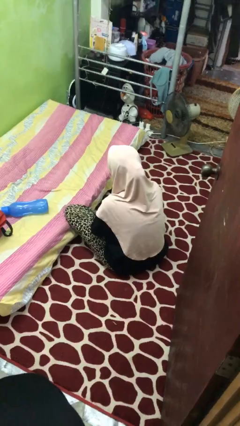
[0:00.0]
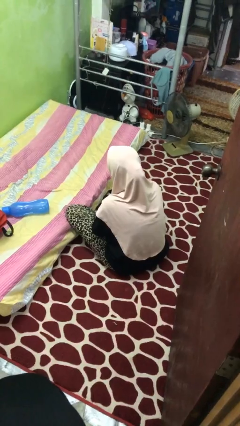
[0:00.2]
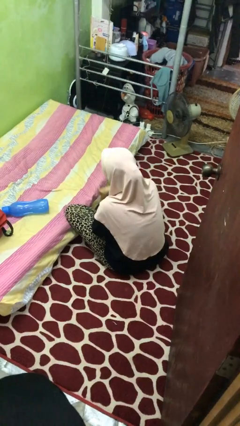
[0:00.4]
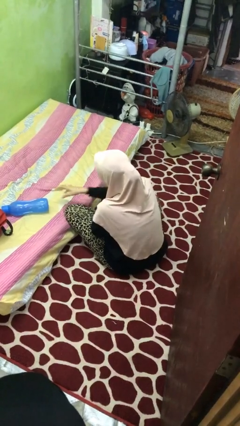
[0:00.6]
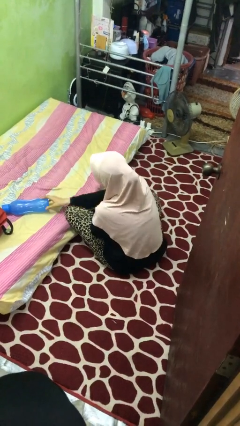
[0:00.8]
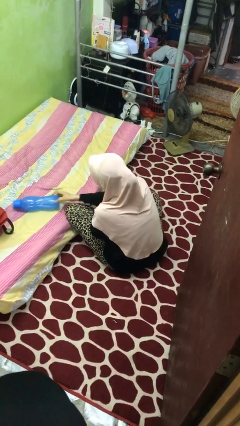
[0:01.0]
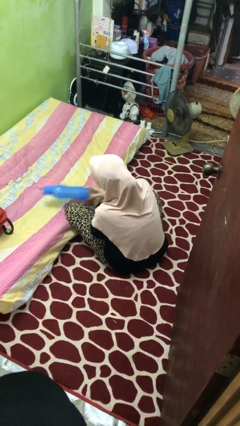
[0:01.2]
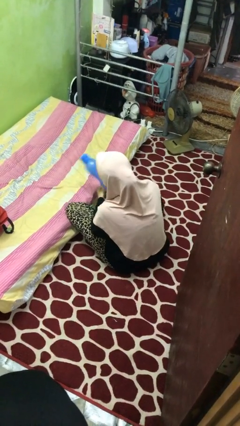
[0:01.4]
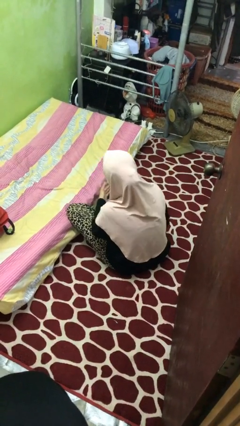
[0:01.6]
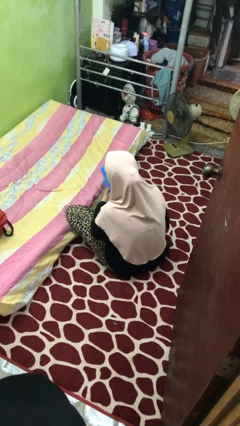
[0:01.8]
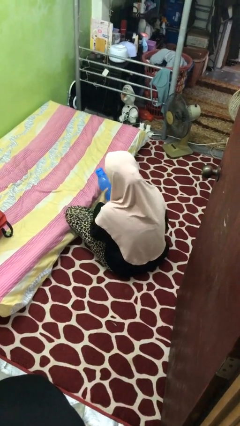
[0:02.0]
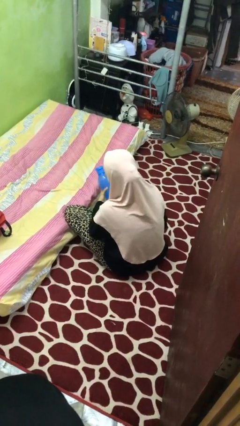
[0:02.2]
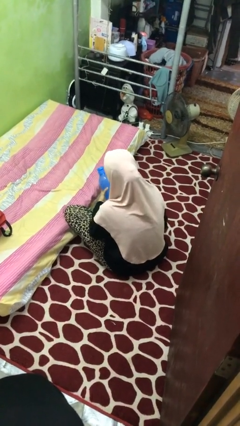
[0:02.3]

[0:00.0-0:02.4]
person picks up object from bed

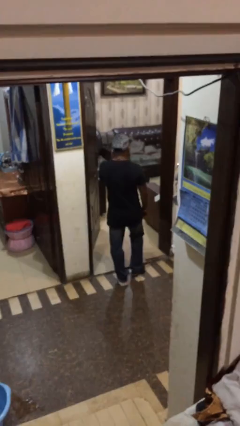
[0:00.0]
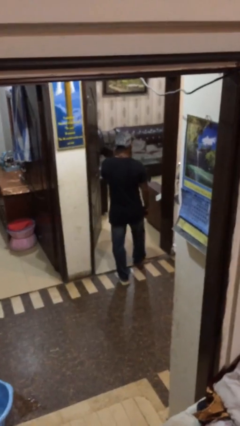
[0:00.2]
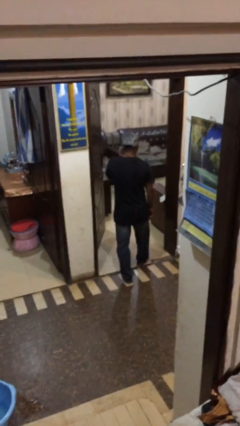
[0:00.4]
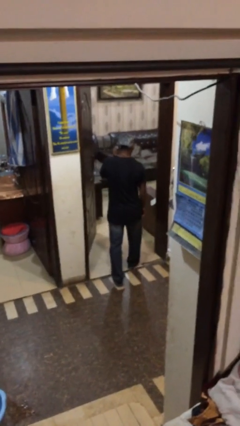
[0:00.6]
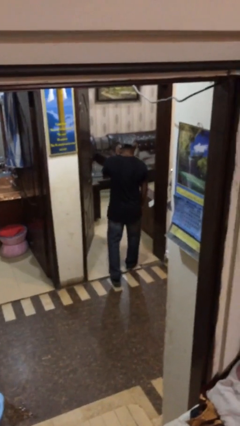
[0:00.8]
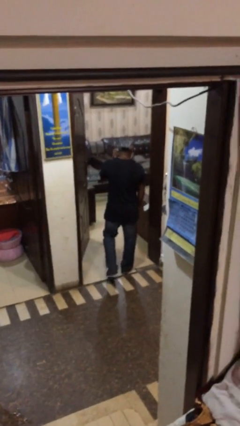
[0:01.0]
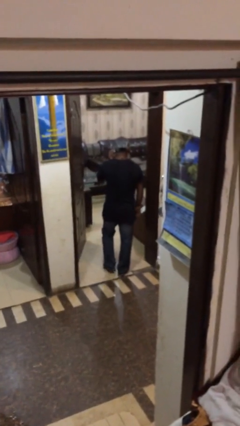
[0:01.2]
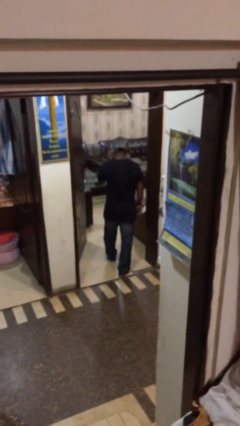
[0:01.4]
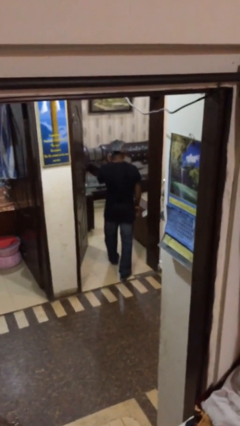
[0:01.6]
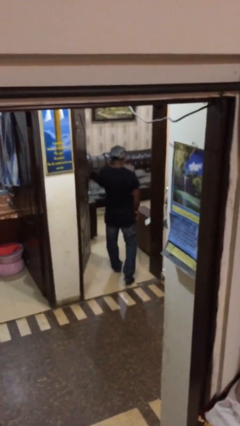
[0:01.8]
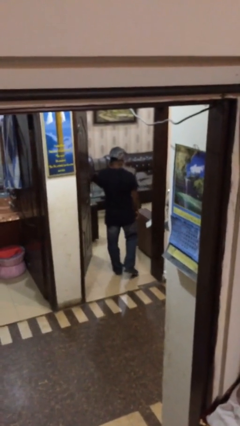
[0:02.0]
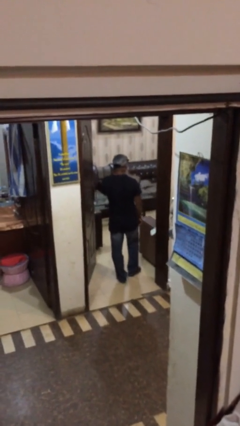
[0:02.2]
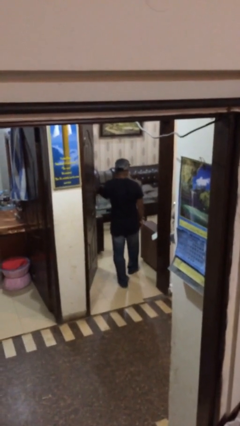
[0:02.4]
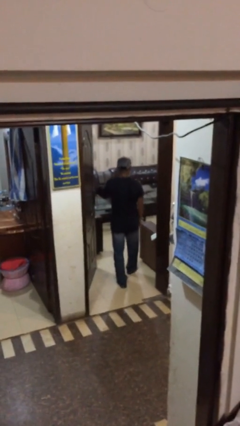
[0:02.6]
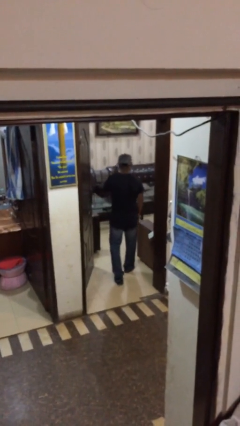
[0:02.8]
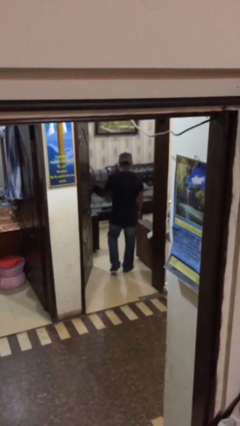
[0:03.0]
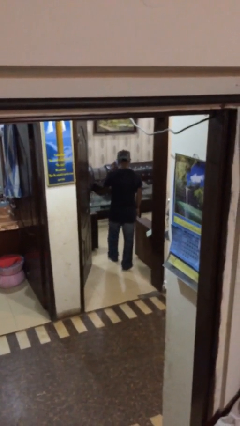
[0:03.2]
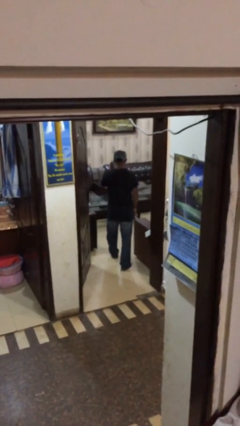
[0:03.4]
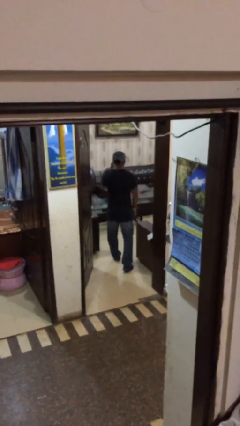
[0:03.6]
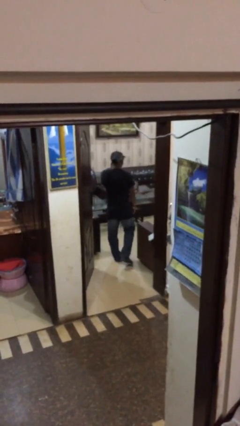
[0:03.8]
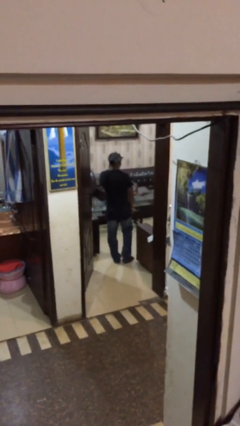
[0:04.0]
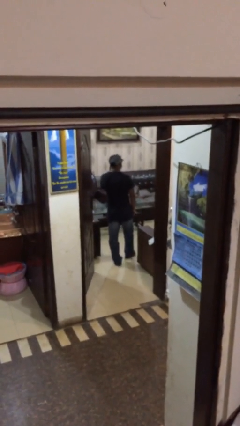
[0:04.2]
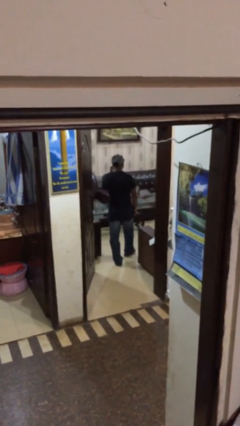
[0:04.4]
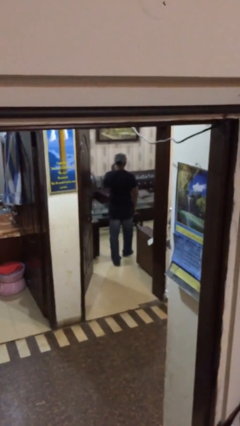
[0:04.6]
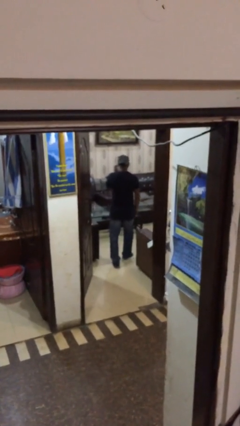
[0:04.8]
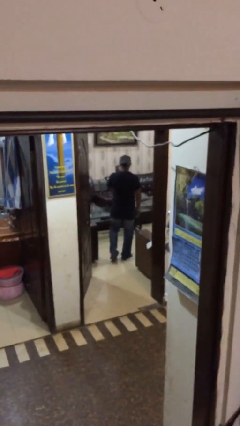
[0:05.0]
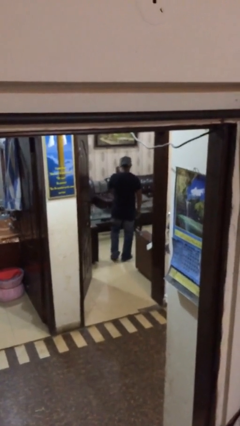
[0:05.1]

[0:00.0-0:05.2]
person exits scene through structure

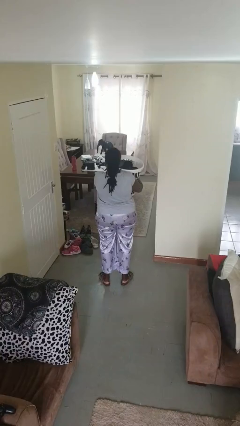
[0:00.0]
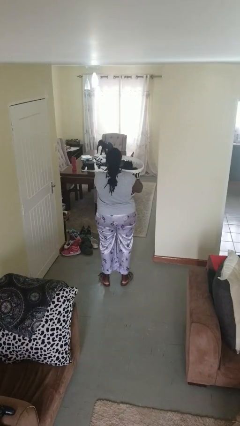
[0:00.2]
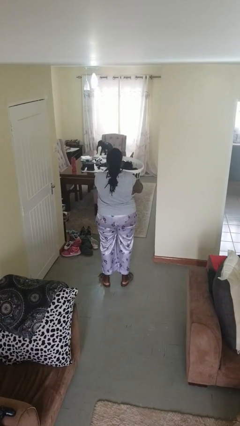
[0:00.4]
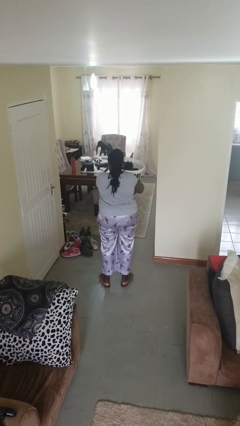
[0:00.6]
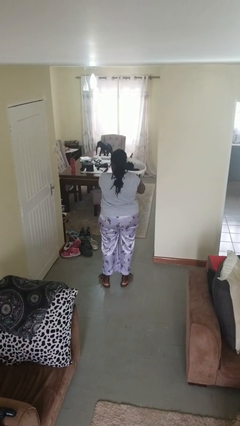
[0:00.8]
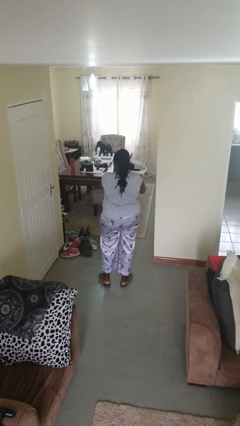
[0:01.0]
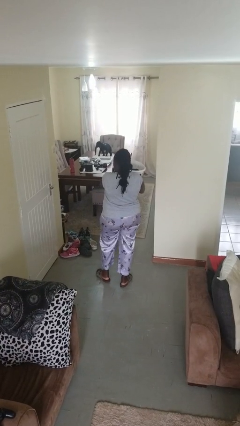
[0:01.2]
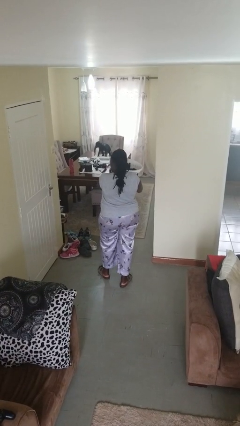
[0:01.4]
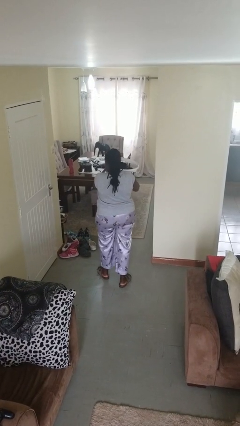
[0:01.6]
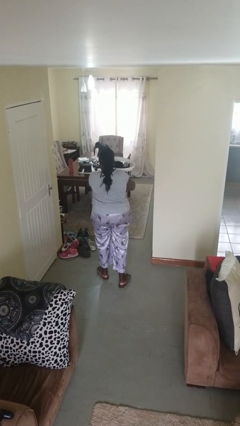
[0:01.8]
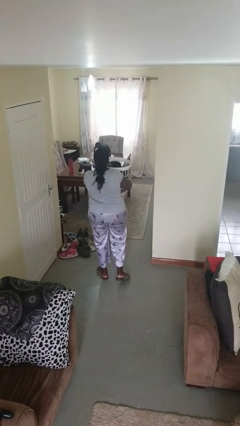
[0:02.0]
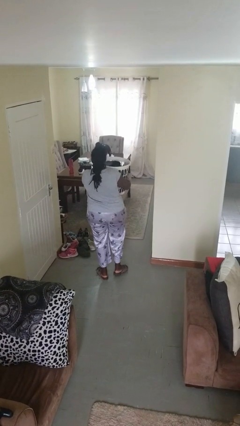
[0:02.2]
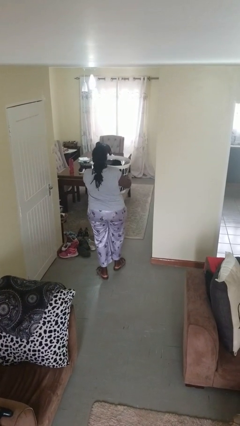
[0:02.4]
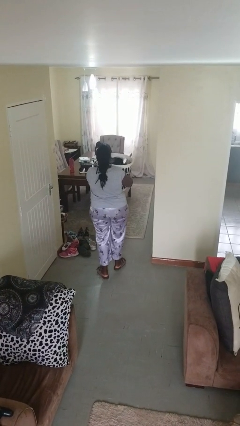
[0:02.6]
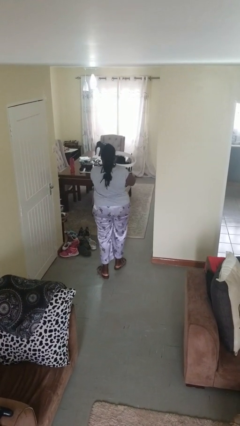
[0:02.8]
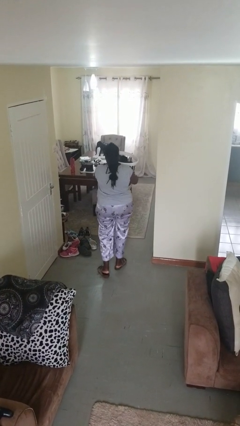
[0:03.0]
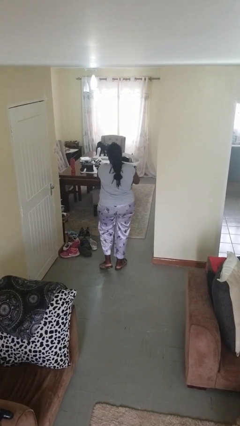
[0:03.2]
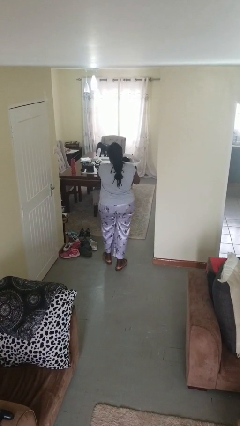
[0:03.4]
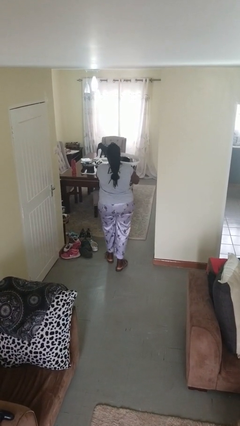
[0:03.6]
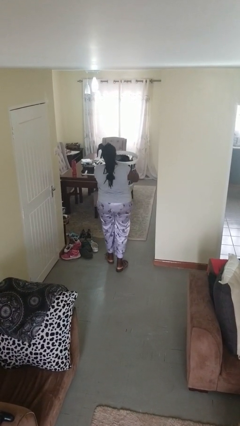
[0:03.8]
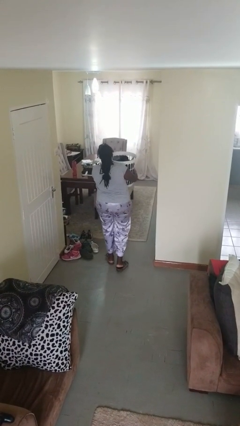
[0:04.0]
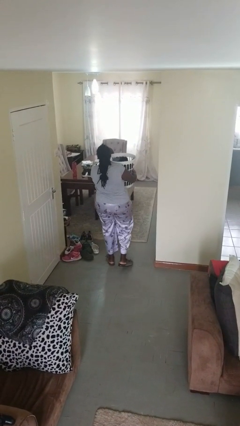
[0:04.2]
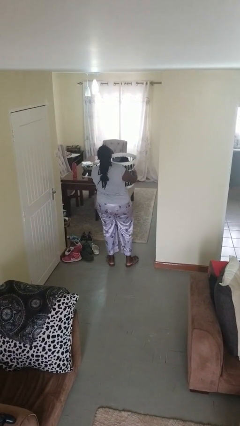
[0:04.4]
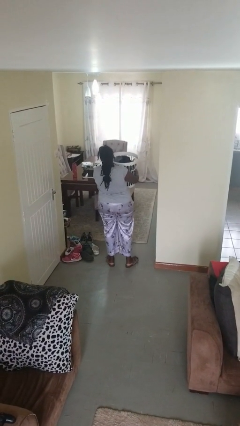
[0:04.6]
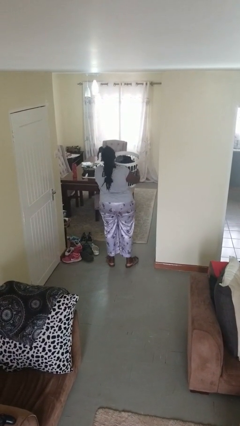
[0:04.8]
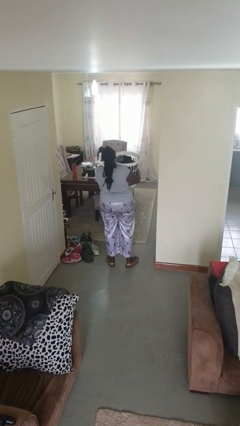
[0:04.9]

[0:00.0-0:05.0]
person carries laundry basket

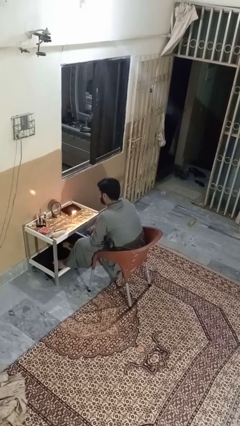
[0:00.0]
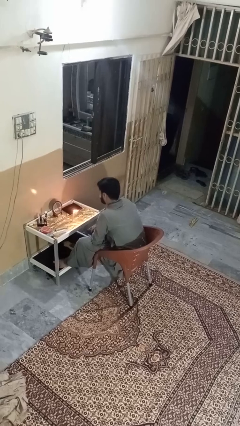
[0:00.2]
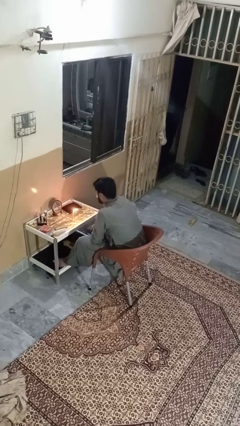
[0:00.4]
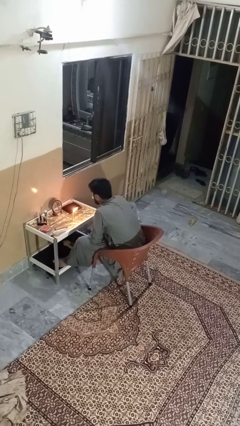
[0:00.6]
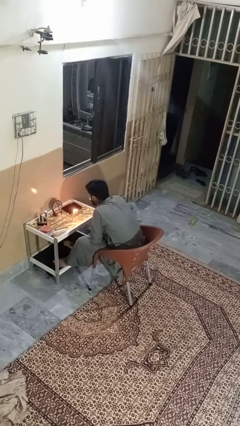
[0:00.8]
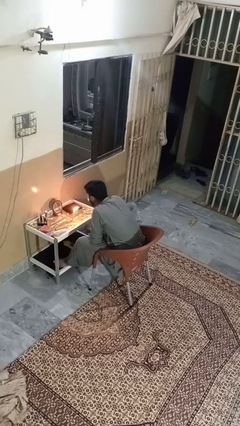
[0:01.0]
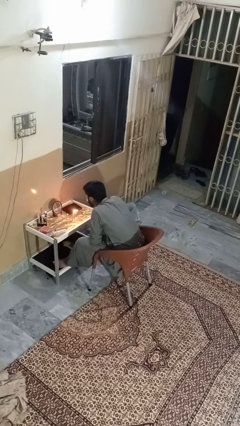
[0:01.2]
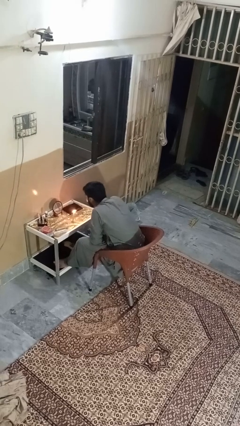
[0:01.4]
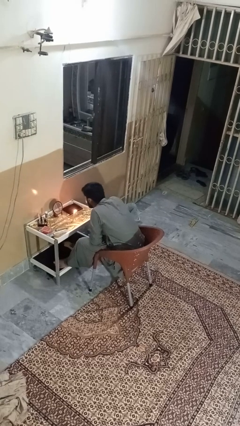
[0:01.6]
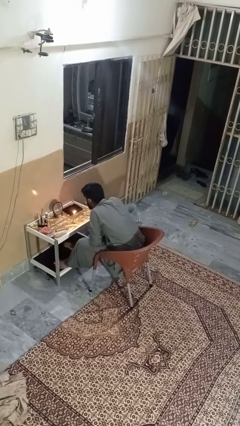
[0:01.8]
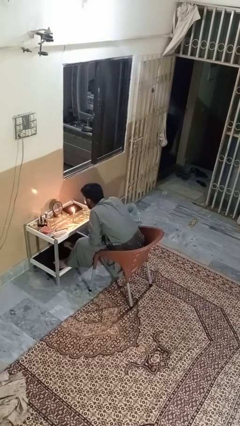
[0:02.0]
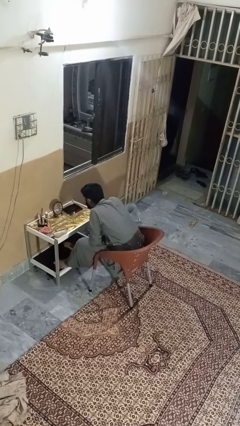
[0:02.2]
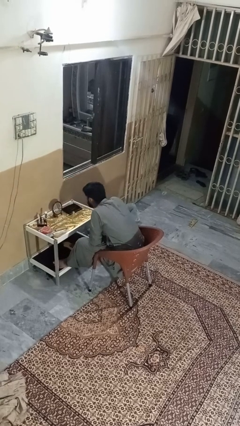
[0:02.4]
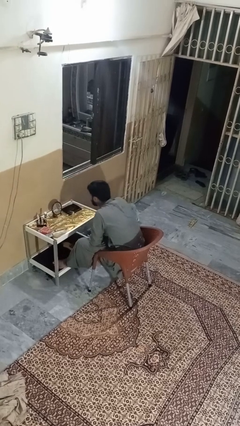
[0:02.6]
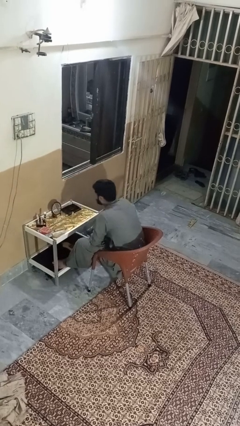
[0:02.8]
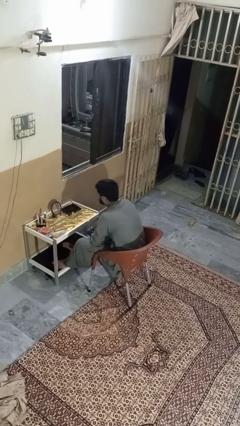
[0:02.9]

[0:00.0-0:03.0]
person extinguishes candle

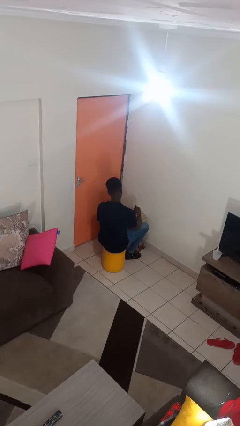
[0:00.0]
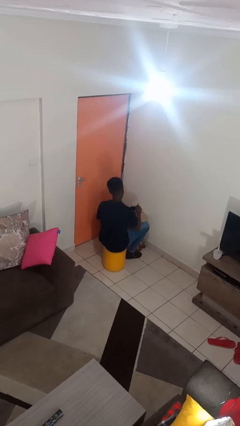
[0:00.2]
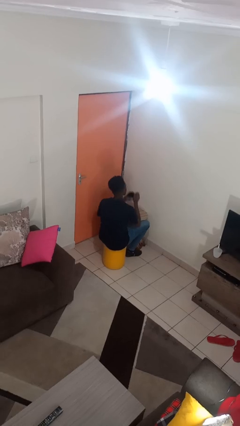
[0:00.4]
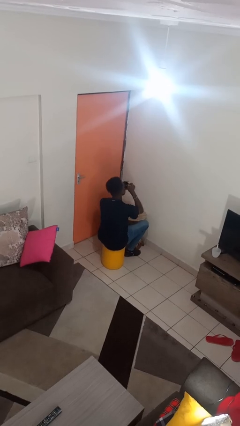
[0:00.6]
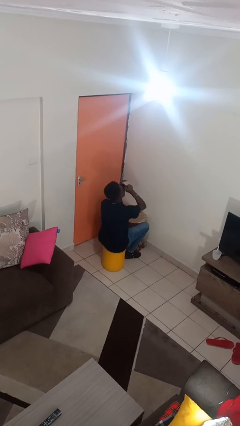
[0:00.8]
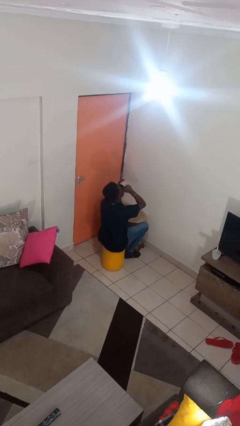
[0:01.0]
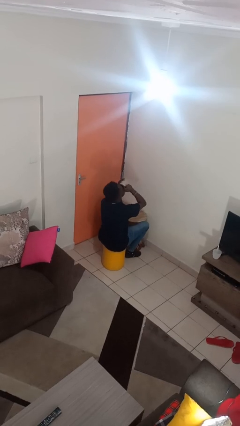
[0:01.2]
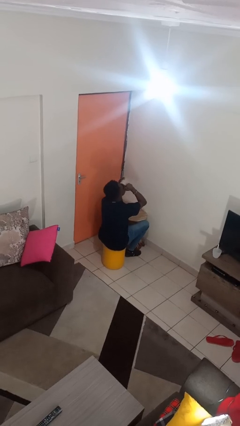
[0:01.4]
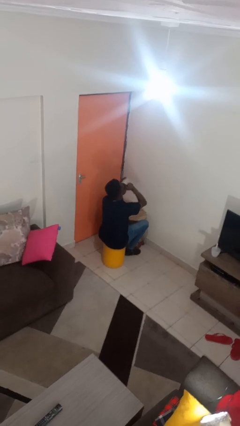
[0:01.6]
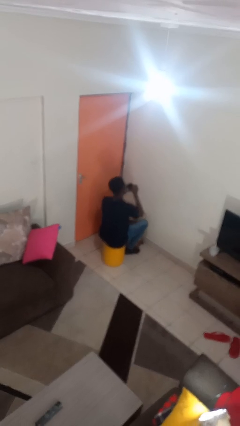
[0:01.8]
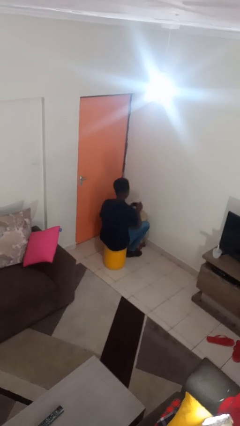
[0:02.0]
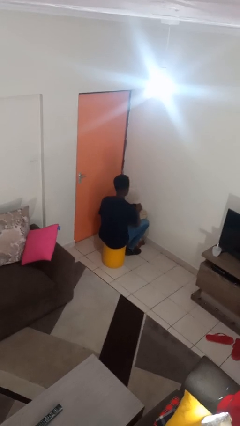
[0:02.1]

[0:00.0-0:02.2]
person drinks from mug
